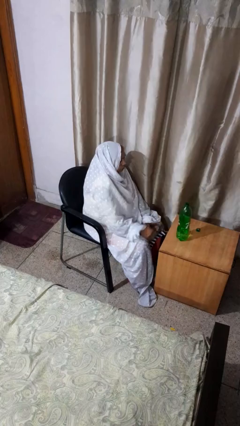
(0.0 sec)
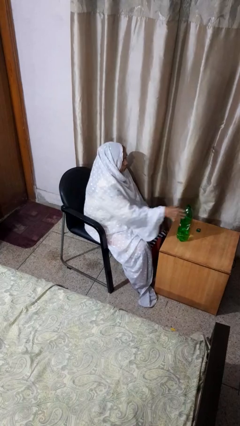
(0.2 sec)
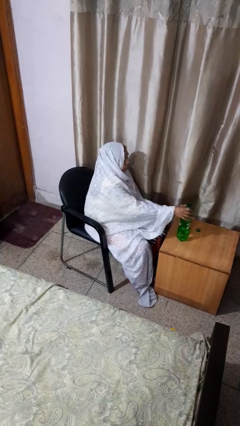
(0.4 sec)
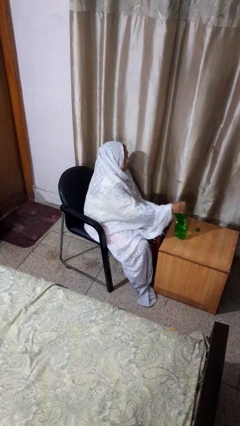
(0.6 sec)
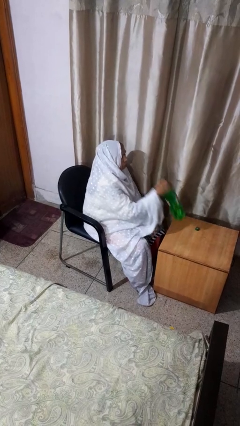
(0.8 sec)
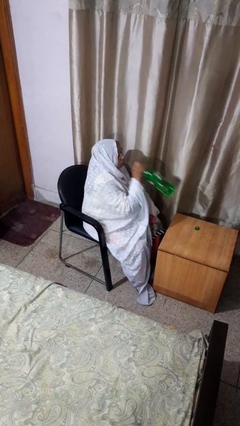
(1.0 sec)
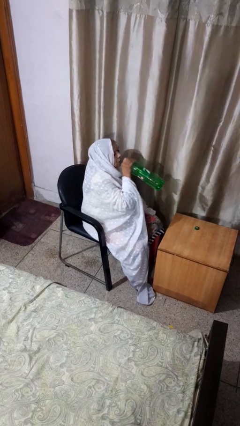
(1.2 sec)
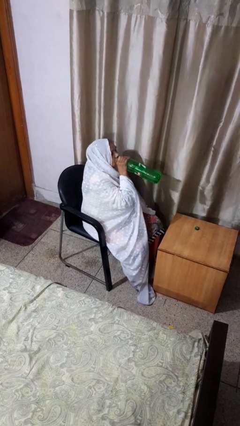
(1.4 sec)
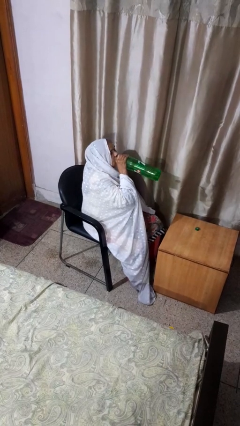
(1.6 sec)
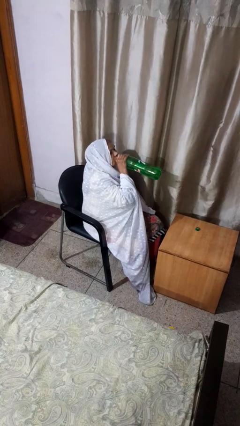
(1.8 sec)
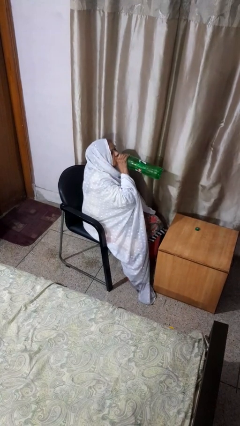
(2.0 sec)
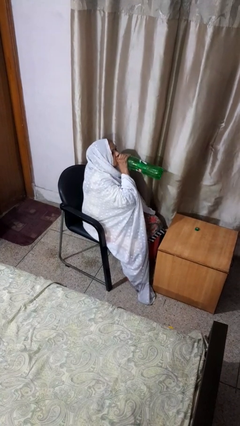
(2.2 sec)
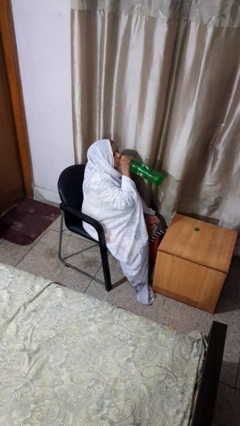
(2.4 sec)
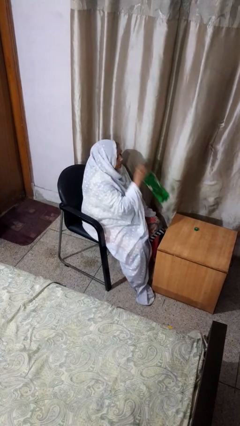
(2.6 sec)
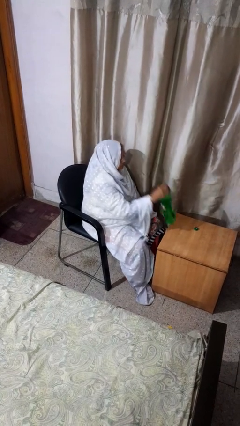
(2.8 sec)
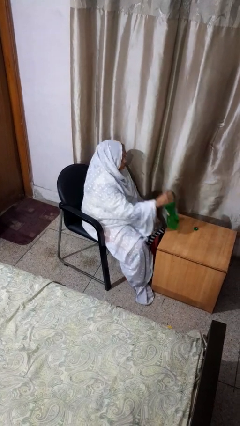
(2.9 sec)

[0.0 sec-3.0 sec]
person drinks from bottle

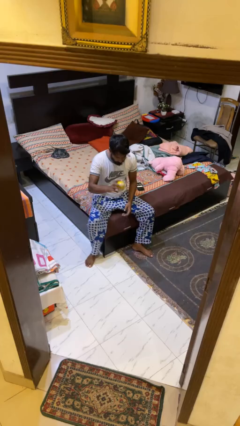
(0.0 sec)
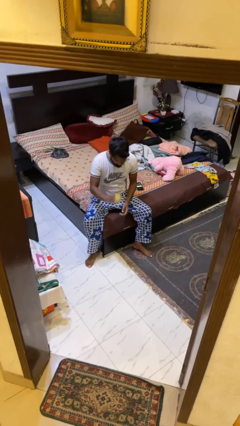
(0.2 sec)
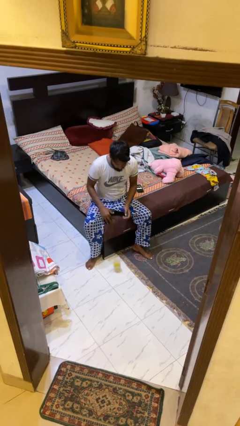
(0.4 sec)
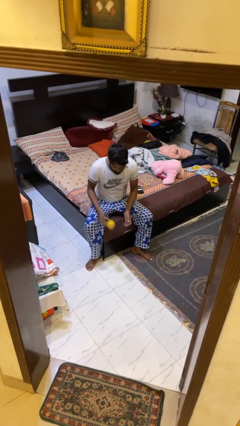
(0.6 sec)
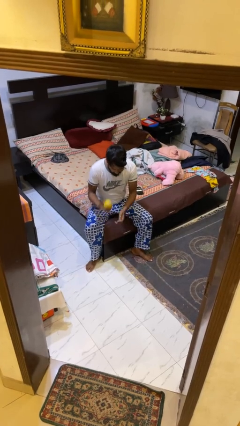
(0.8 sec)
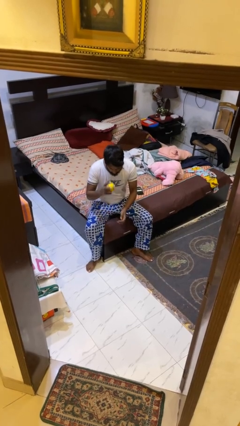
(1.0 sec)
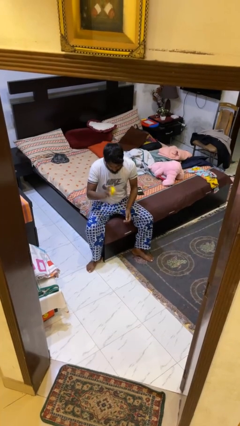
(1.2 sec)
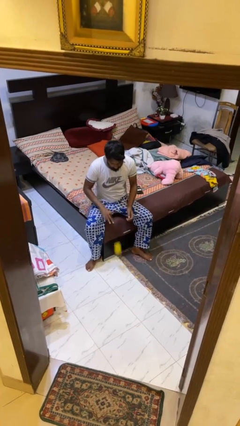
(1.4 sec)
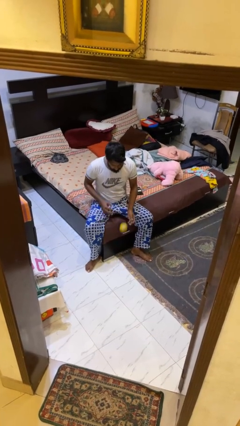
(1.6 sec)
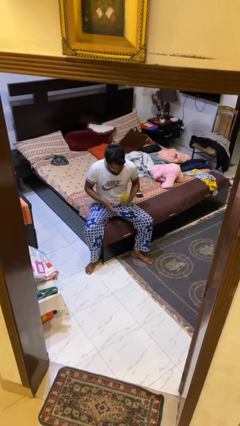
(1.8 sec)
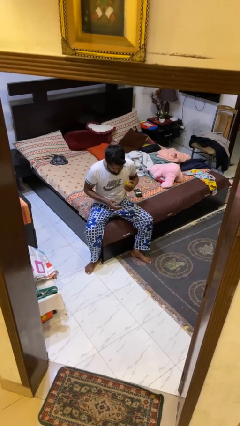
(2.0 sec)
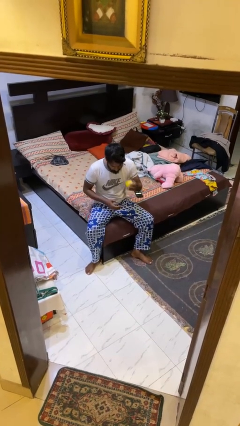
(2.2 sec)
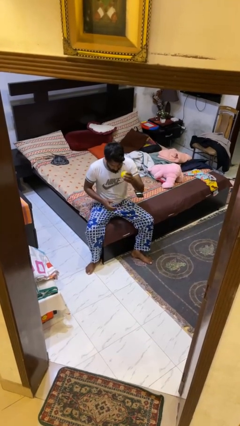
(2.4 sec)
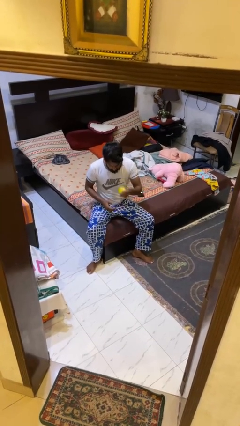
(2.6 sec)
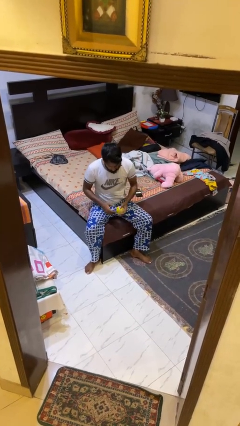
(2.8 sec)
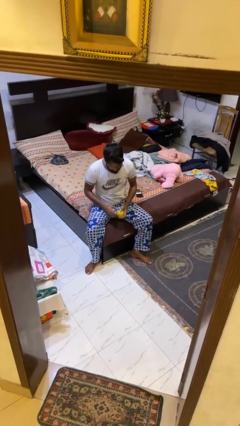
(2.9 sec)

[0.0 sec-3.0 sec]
person bounces ball on floor

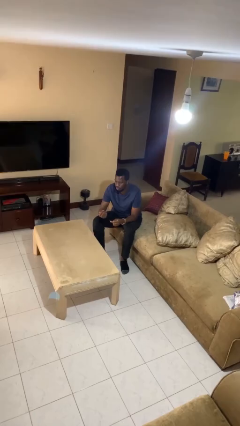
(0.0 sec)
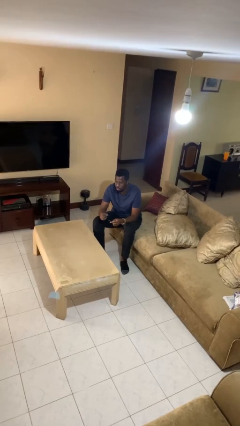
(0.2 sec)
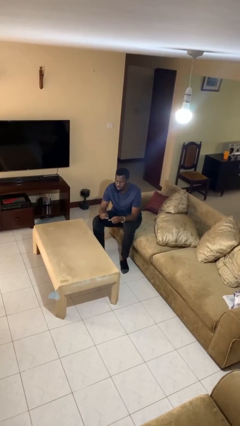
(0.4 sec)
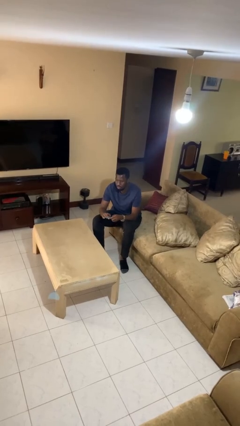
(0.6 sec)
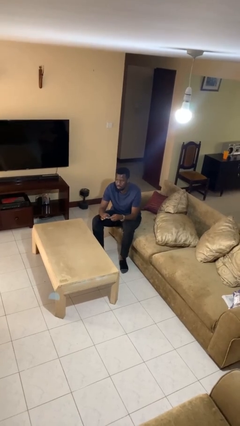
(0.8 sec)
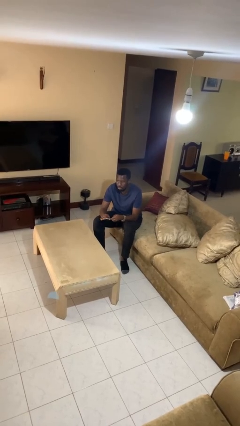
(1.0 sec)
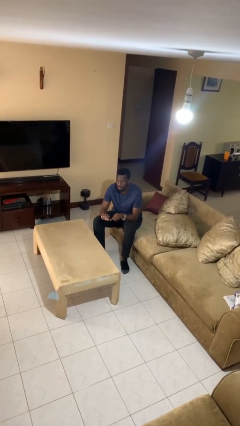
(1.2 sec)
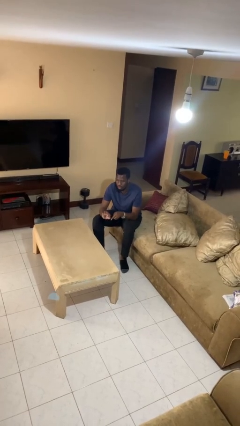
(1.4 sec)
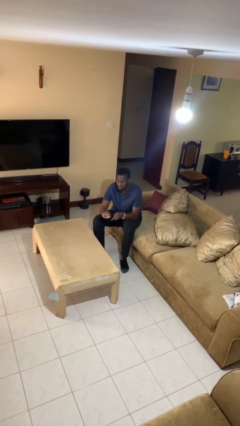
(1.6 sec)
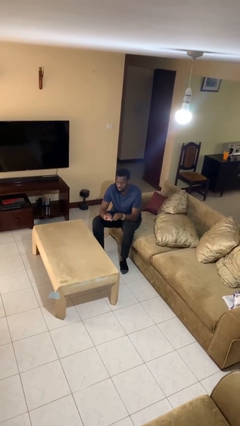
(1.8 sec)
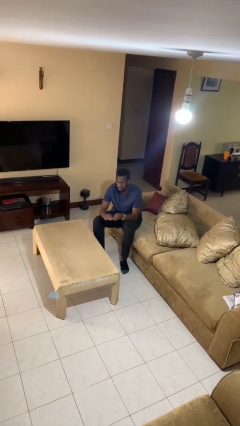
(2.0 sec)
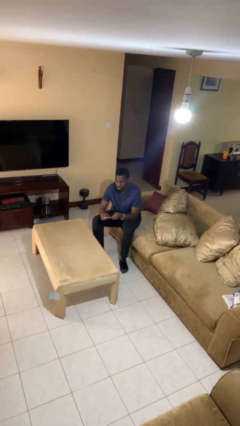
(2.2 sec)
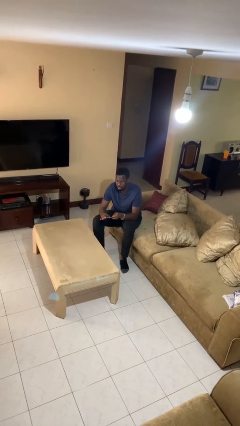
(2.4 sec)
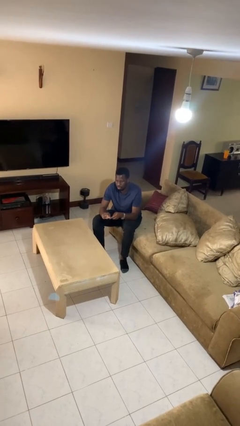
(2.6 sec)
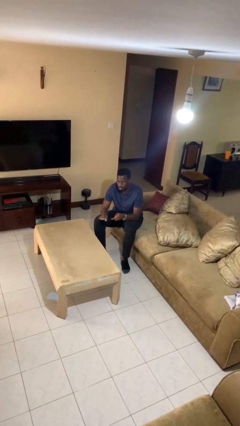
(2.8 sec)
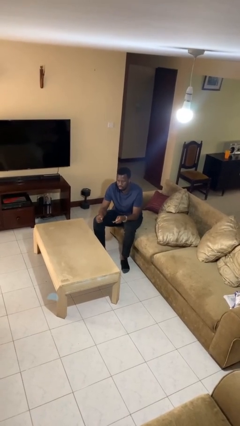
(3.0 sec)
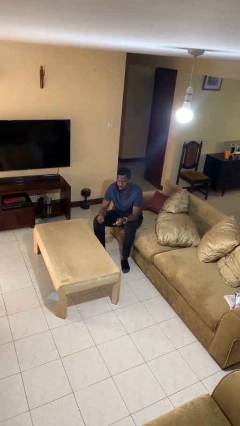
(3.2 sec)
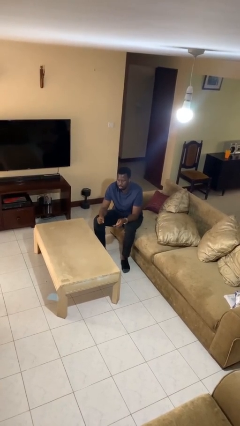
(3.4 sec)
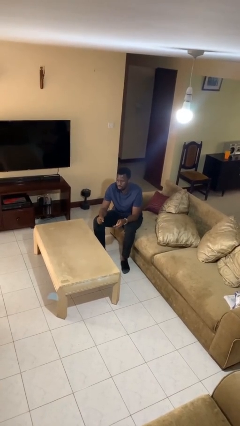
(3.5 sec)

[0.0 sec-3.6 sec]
person files fingernails

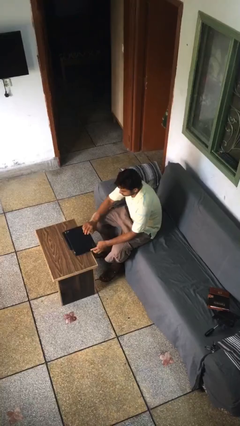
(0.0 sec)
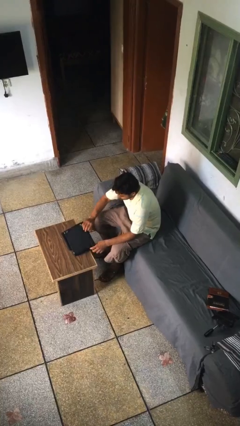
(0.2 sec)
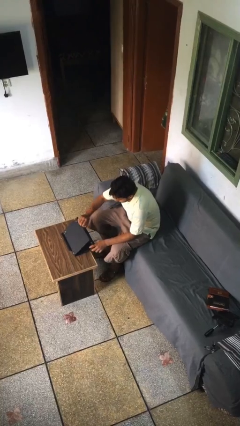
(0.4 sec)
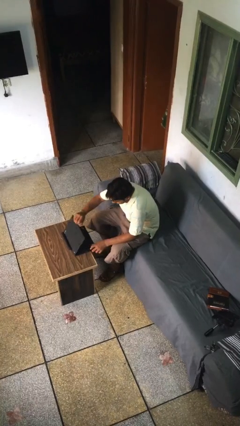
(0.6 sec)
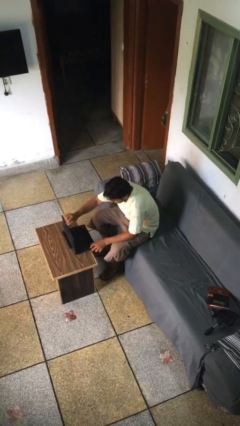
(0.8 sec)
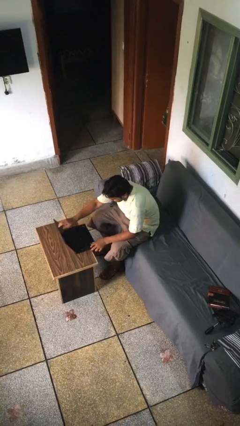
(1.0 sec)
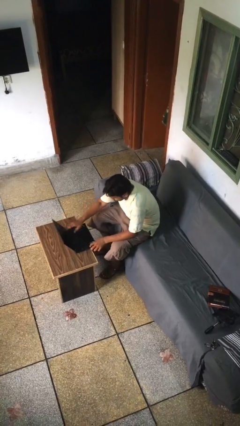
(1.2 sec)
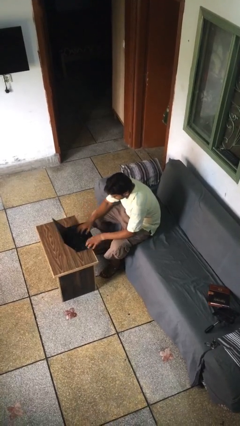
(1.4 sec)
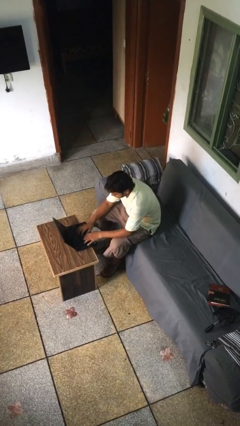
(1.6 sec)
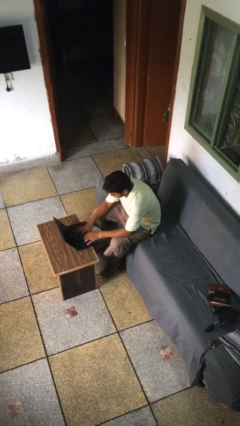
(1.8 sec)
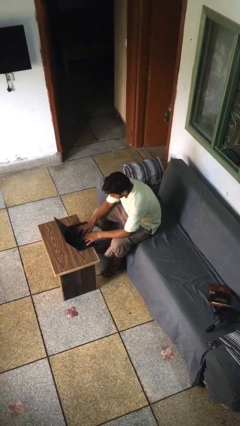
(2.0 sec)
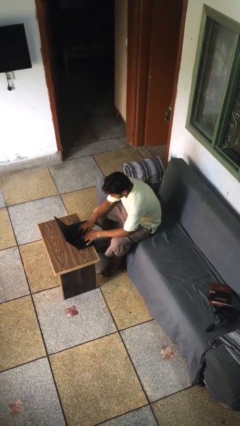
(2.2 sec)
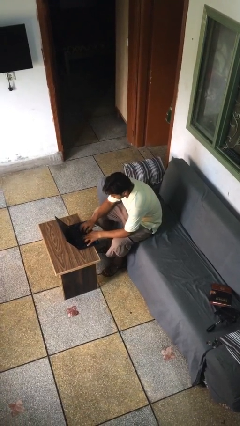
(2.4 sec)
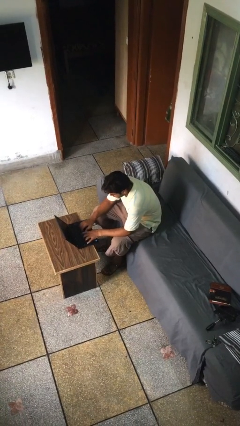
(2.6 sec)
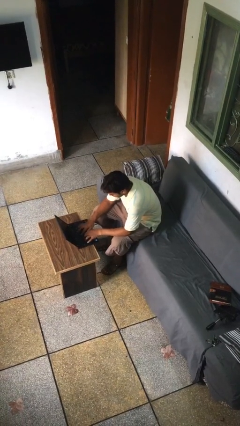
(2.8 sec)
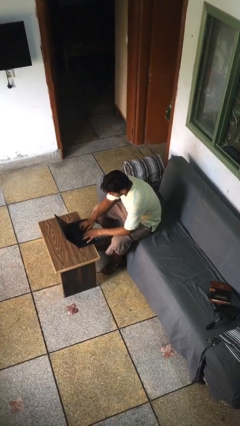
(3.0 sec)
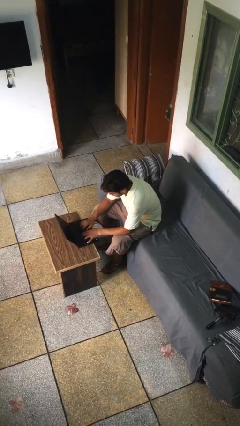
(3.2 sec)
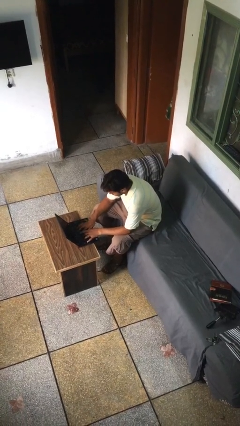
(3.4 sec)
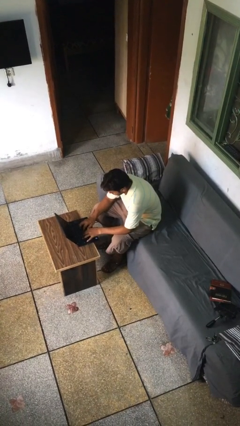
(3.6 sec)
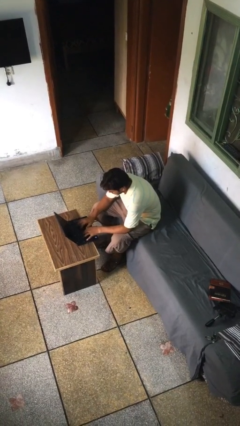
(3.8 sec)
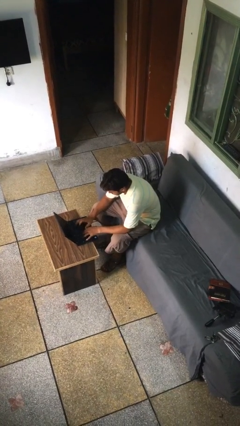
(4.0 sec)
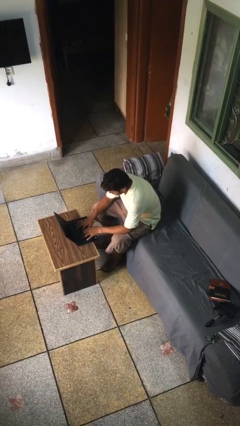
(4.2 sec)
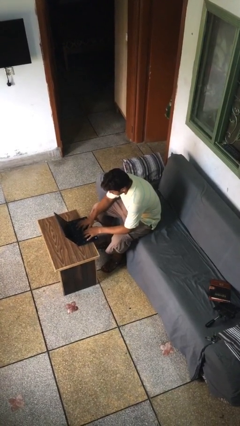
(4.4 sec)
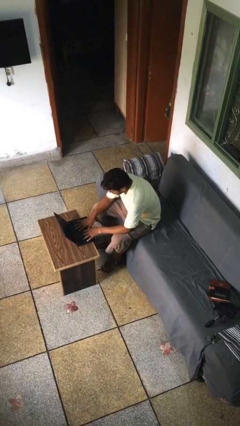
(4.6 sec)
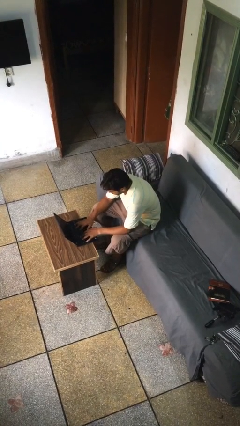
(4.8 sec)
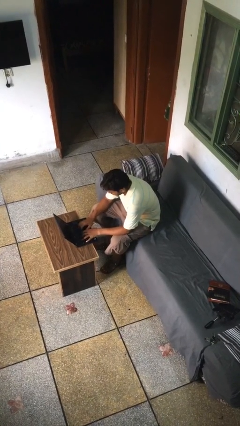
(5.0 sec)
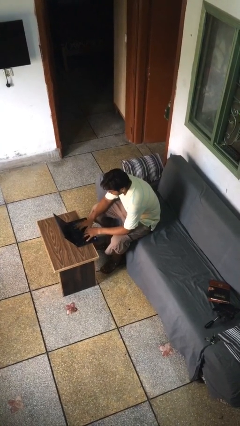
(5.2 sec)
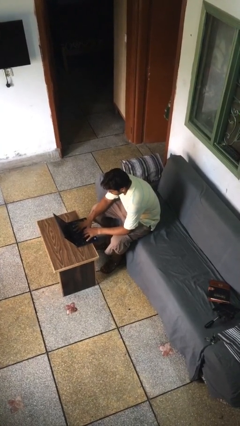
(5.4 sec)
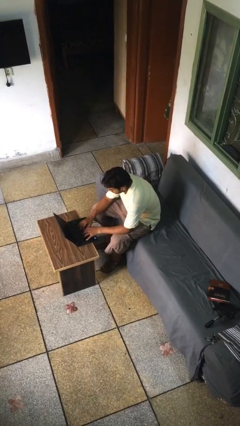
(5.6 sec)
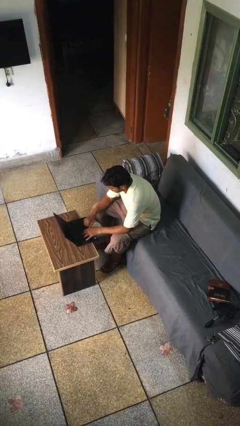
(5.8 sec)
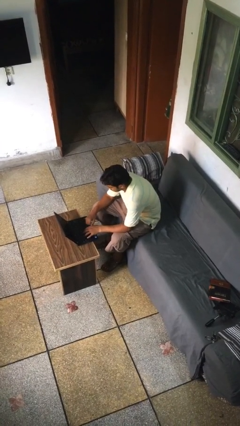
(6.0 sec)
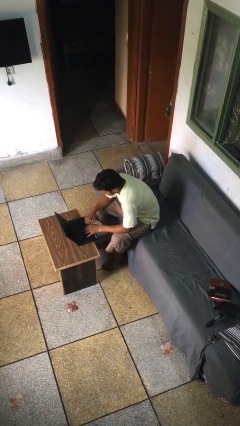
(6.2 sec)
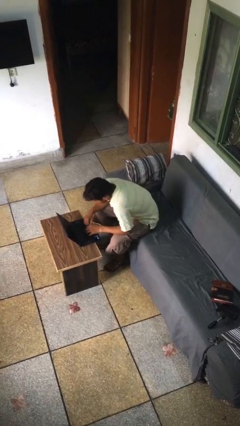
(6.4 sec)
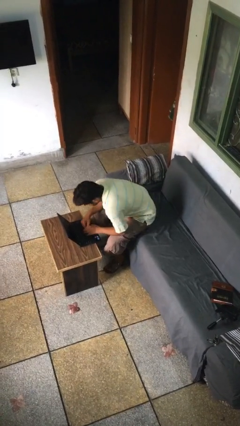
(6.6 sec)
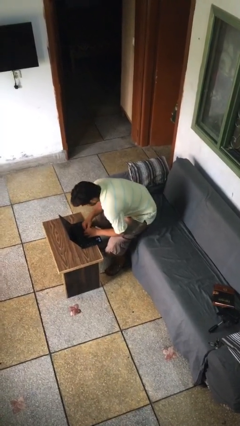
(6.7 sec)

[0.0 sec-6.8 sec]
person interacts with laptop

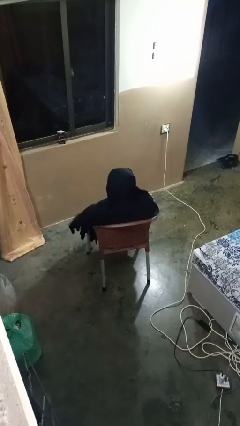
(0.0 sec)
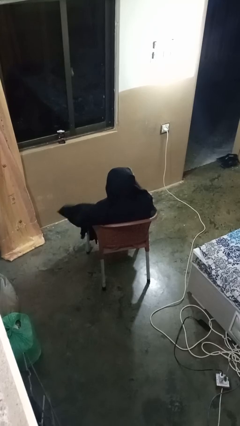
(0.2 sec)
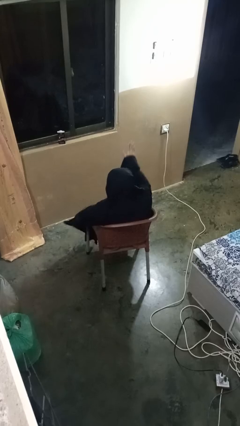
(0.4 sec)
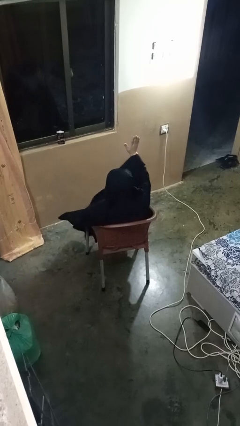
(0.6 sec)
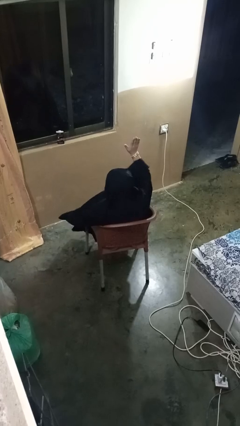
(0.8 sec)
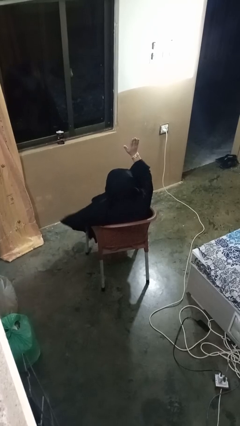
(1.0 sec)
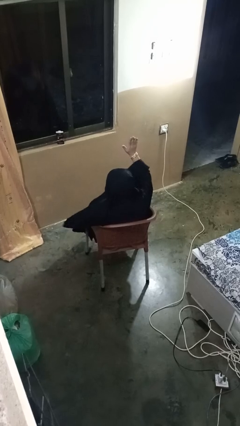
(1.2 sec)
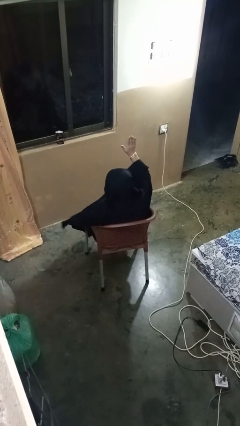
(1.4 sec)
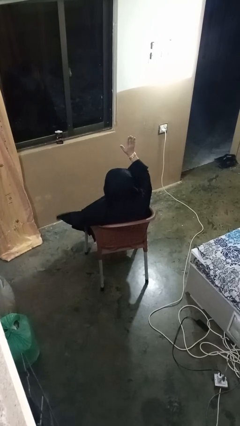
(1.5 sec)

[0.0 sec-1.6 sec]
person gestures raise hand
